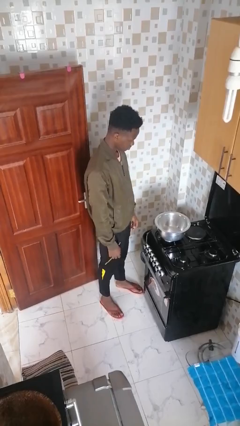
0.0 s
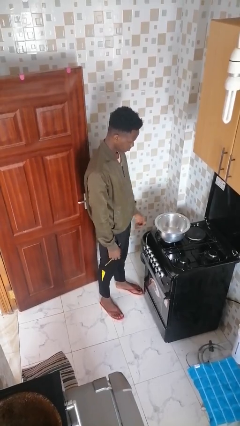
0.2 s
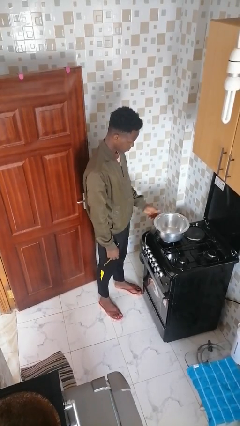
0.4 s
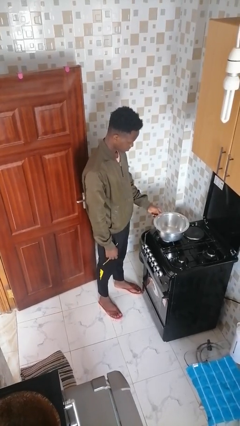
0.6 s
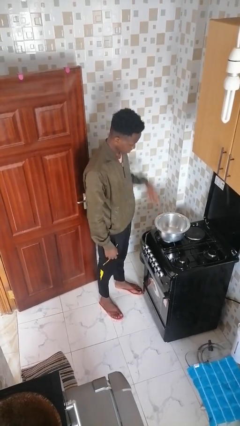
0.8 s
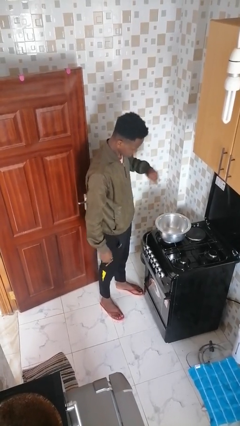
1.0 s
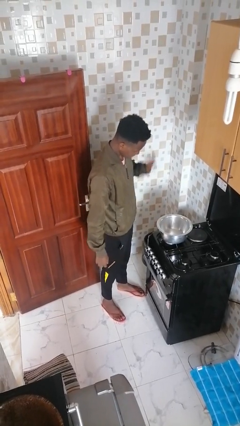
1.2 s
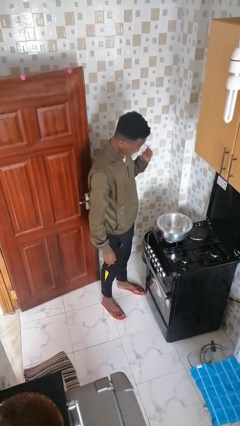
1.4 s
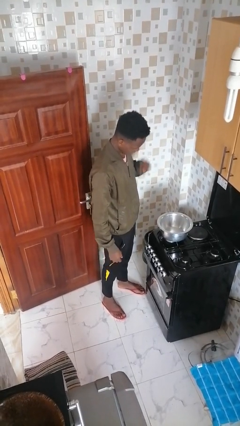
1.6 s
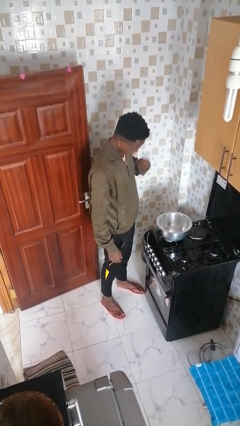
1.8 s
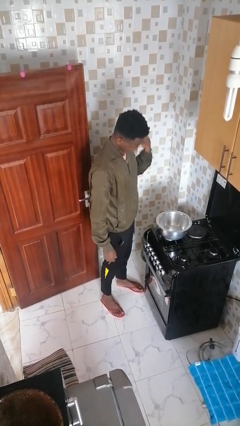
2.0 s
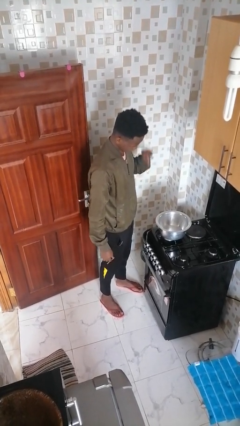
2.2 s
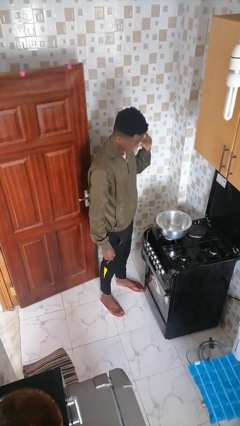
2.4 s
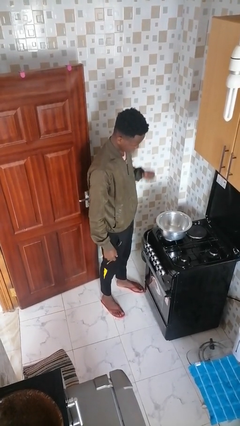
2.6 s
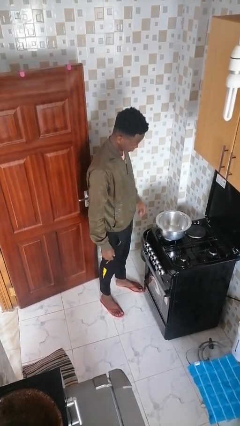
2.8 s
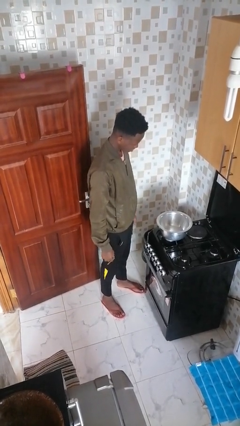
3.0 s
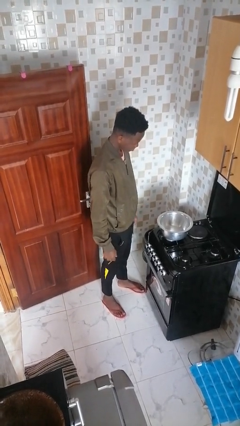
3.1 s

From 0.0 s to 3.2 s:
person burns hand

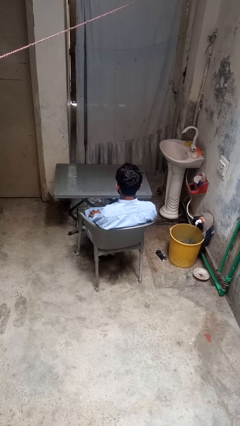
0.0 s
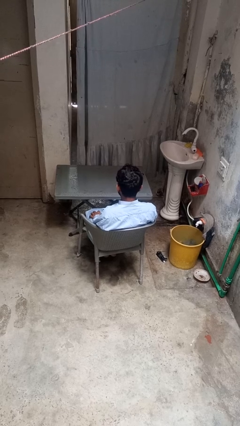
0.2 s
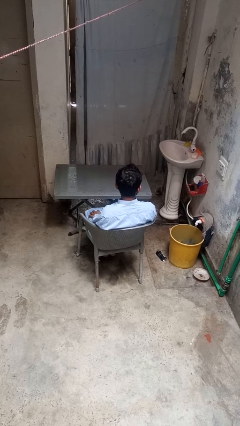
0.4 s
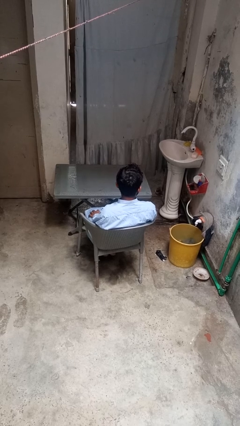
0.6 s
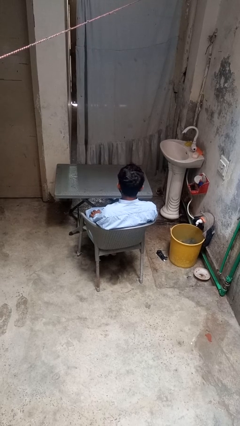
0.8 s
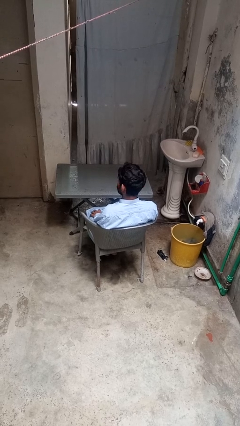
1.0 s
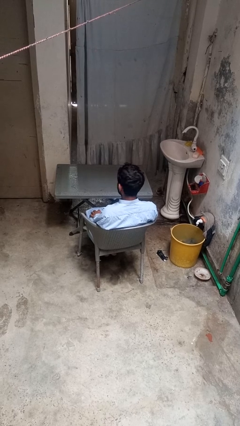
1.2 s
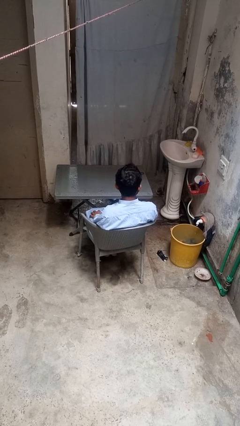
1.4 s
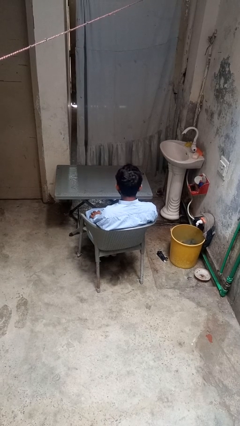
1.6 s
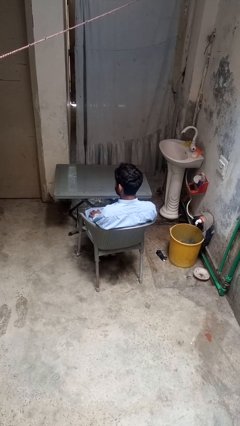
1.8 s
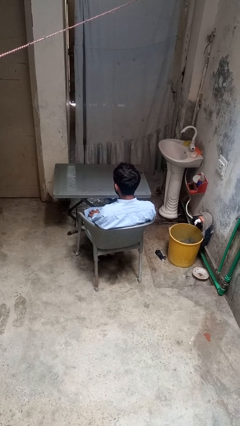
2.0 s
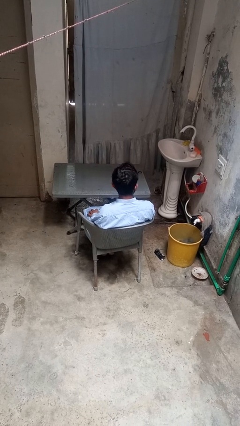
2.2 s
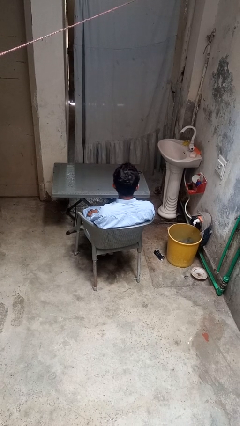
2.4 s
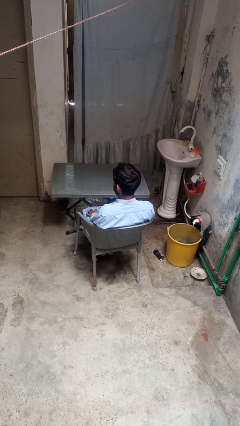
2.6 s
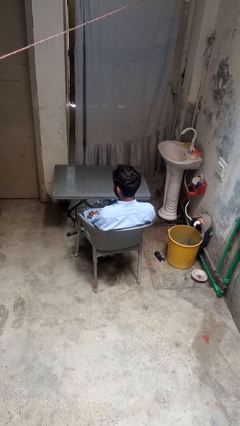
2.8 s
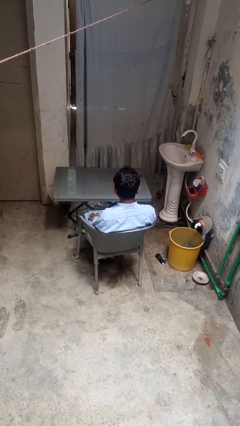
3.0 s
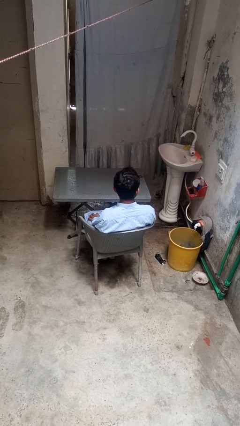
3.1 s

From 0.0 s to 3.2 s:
person shakes head

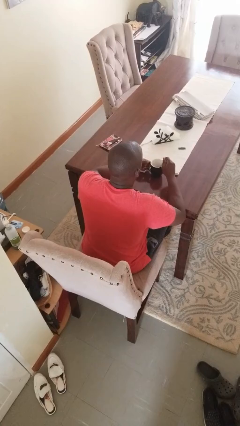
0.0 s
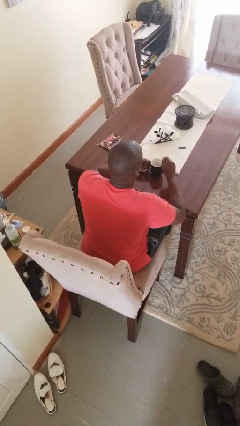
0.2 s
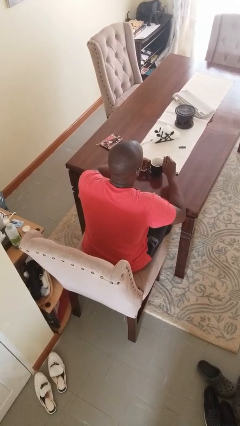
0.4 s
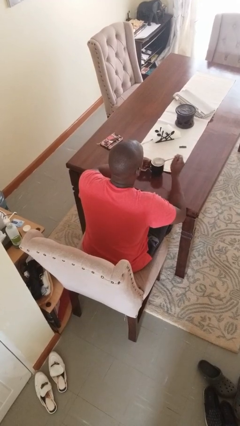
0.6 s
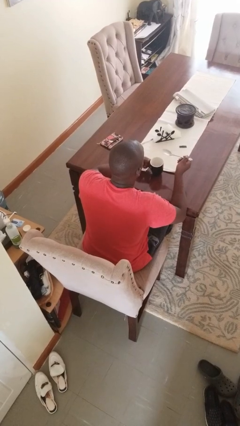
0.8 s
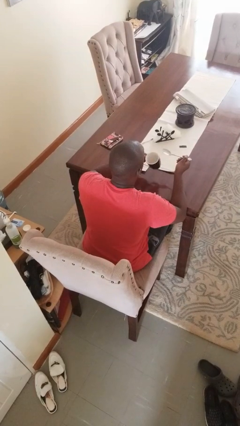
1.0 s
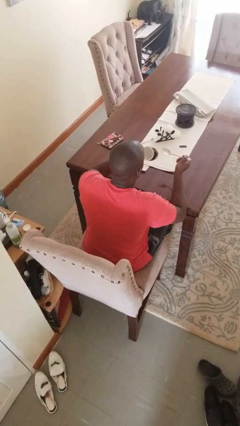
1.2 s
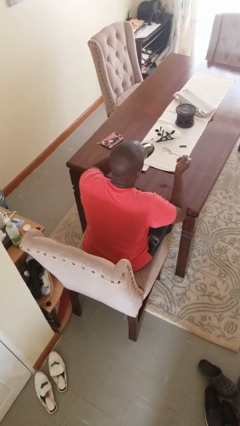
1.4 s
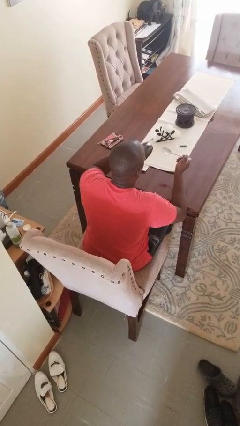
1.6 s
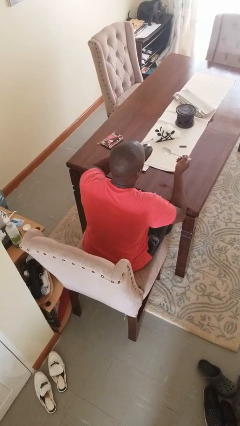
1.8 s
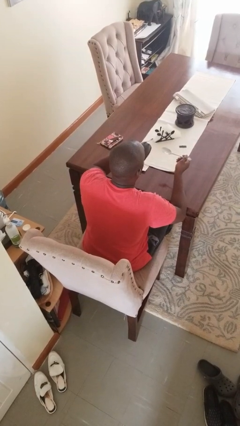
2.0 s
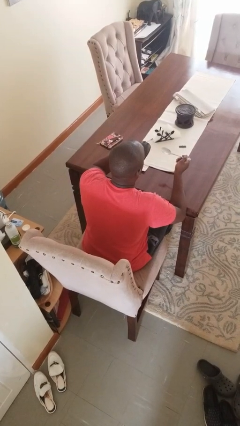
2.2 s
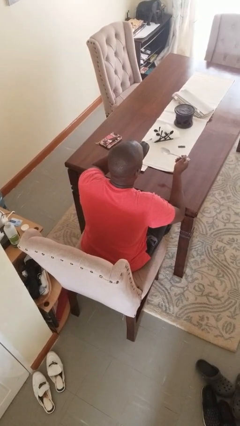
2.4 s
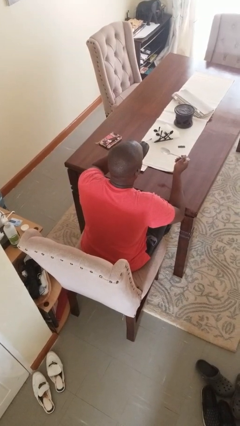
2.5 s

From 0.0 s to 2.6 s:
person drinks from mug

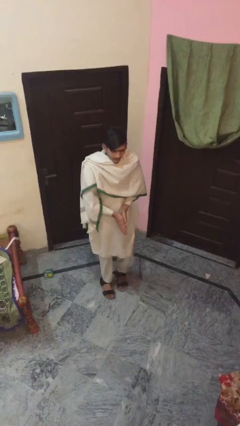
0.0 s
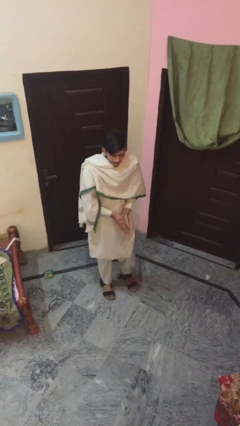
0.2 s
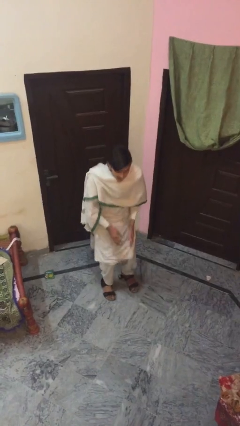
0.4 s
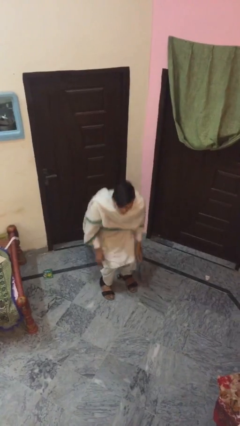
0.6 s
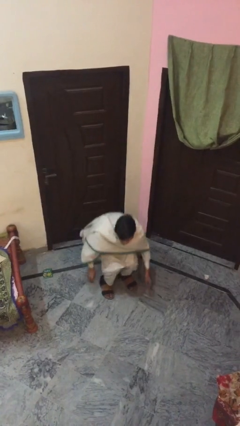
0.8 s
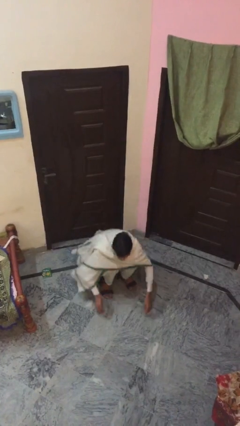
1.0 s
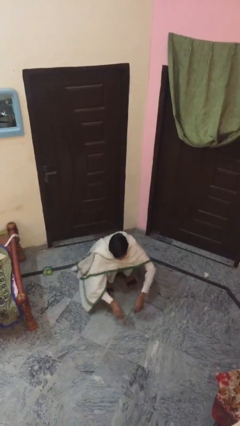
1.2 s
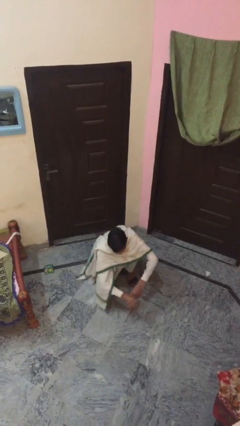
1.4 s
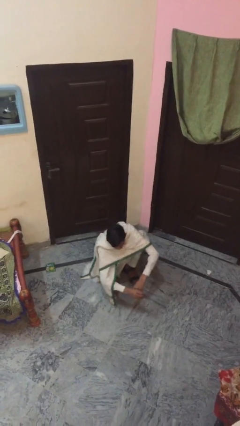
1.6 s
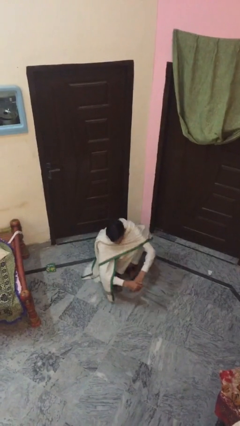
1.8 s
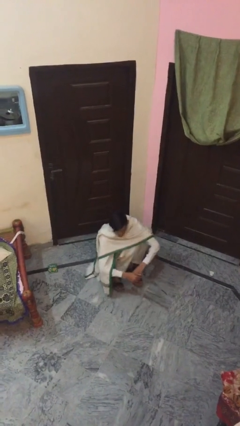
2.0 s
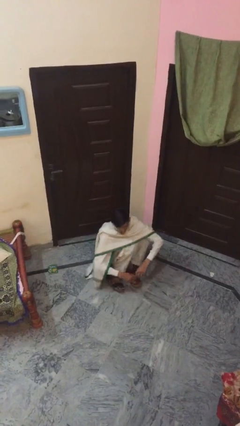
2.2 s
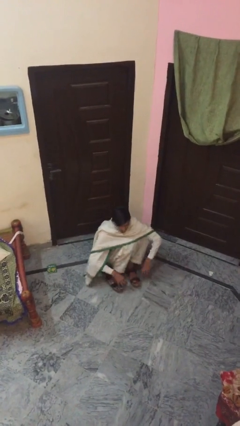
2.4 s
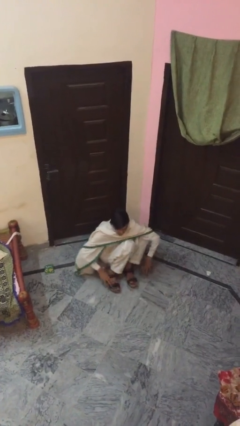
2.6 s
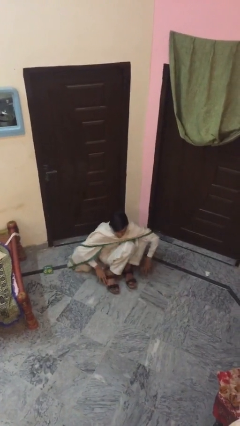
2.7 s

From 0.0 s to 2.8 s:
person sits down

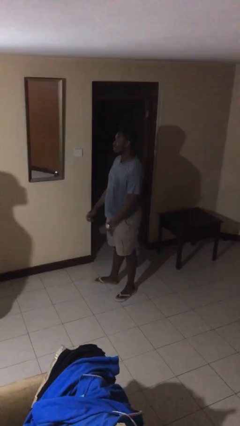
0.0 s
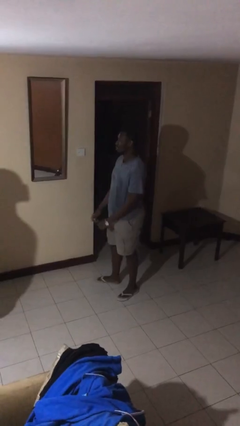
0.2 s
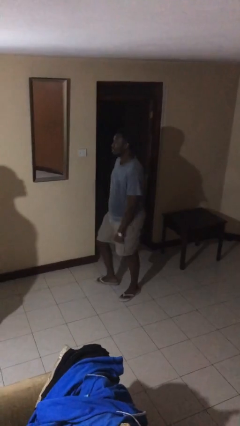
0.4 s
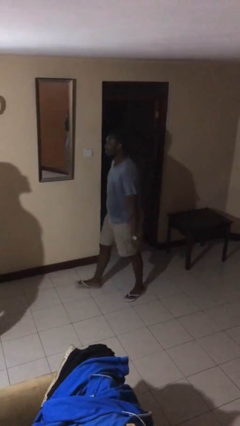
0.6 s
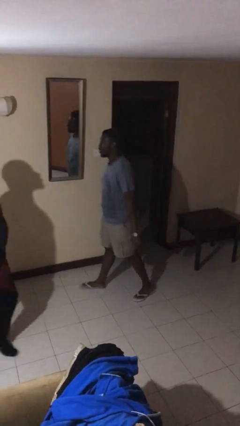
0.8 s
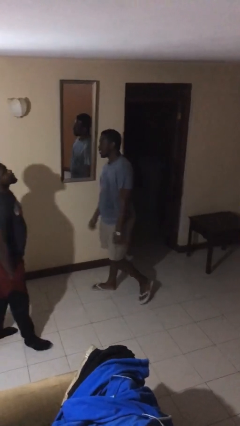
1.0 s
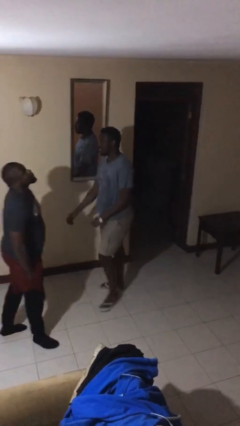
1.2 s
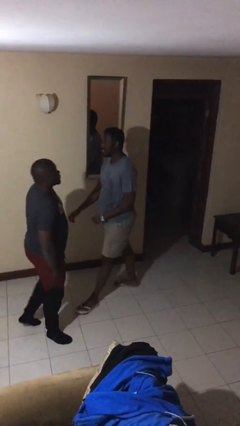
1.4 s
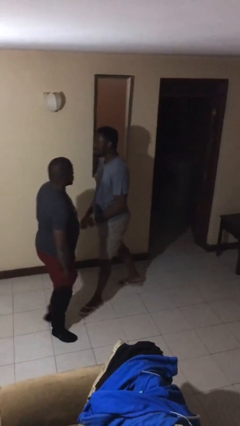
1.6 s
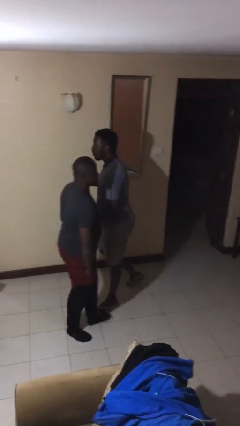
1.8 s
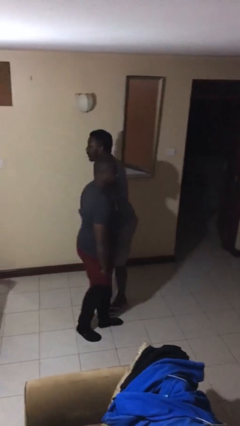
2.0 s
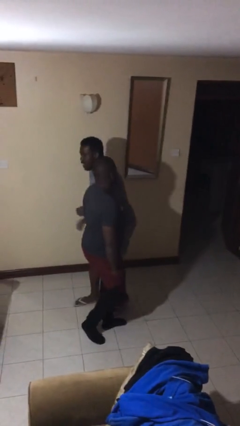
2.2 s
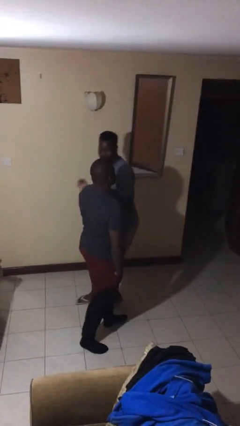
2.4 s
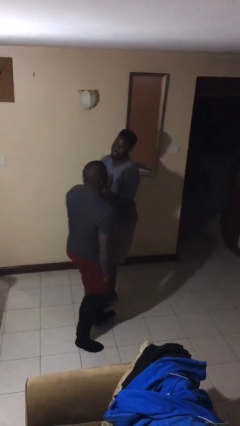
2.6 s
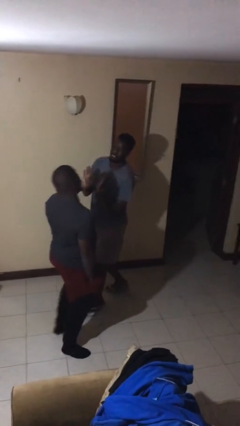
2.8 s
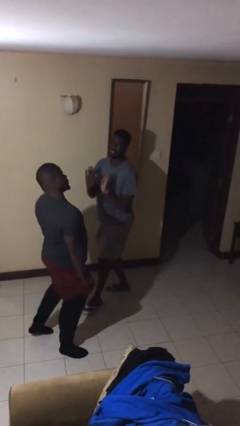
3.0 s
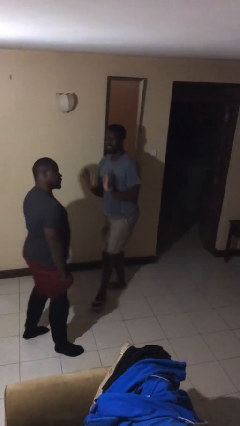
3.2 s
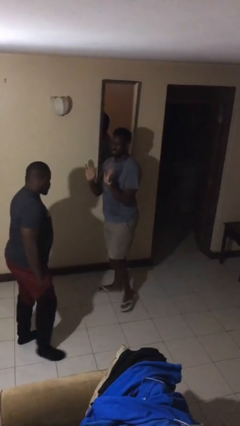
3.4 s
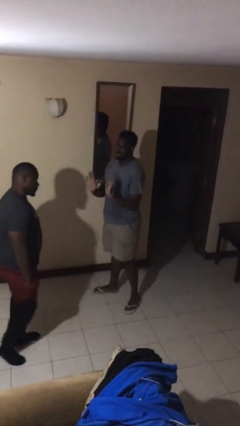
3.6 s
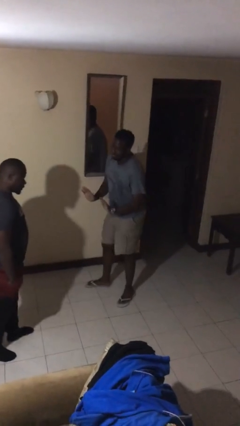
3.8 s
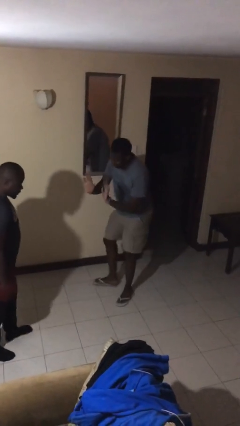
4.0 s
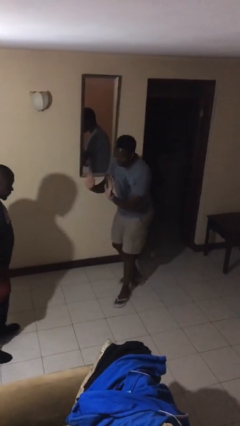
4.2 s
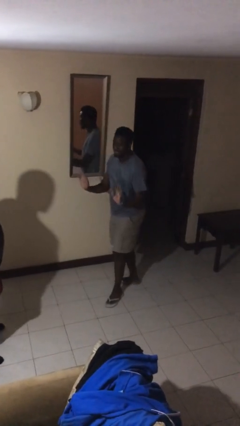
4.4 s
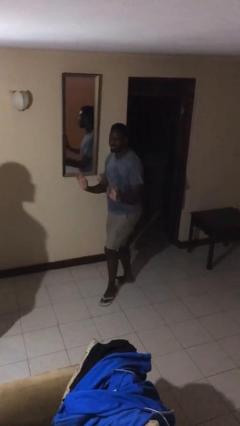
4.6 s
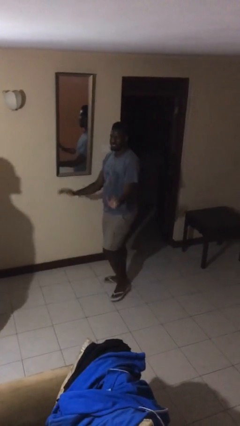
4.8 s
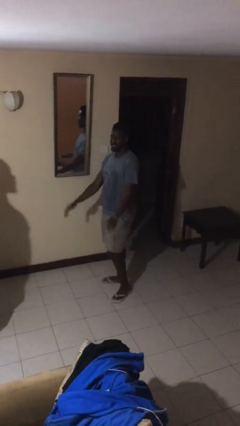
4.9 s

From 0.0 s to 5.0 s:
person bumps into person

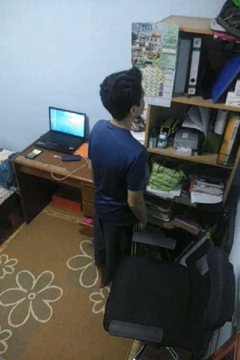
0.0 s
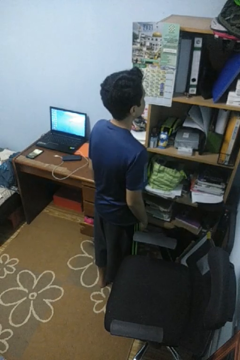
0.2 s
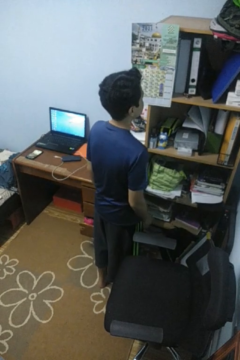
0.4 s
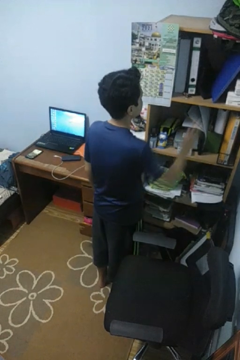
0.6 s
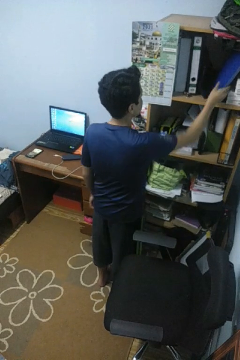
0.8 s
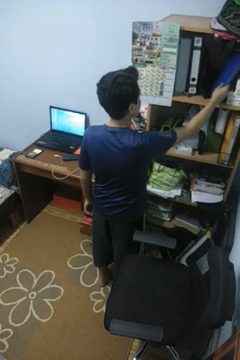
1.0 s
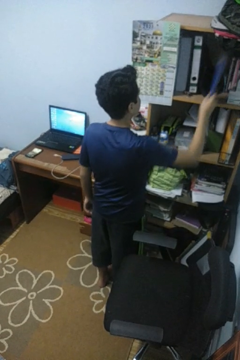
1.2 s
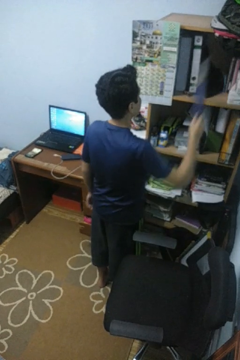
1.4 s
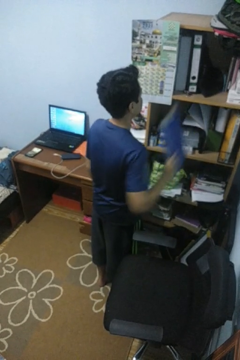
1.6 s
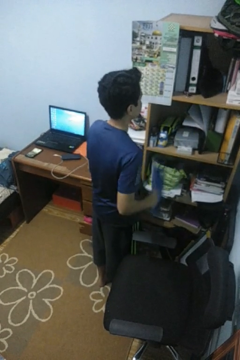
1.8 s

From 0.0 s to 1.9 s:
person picks up object from cabinet
